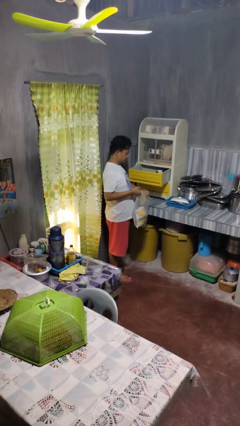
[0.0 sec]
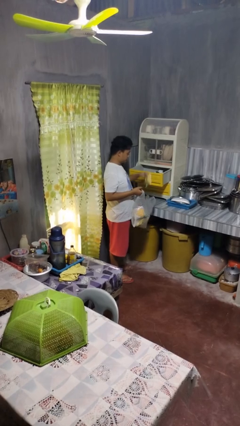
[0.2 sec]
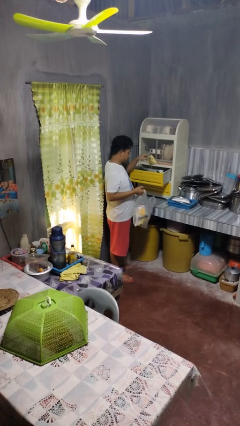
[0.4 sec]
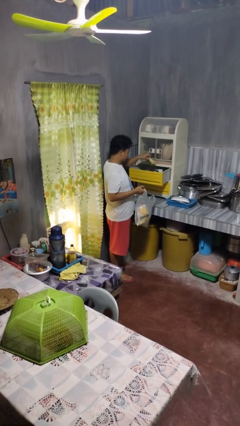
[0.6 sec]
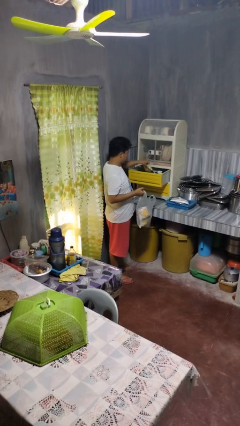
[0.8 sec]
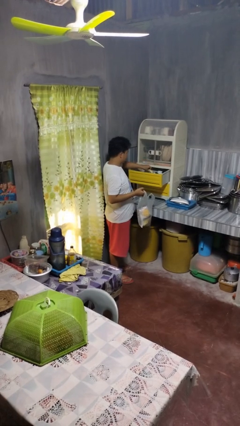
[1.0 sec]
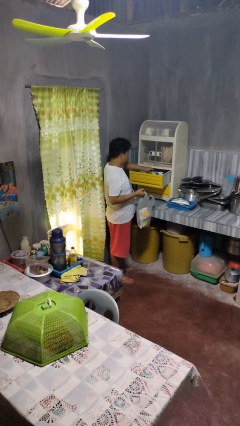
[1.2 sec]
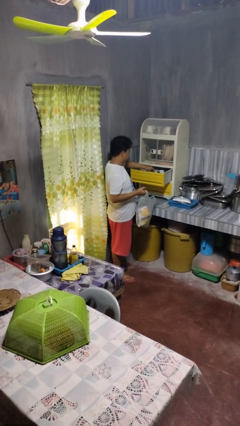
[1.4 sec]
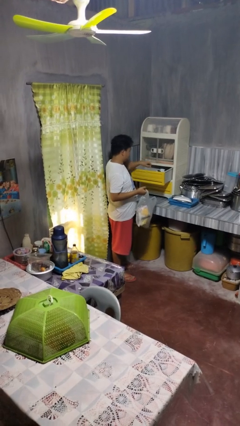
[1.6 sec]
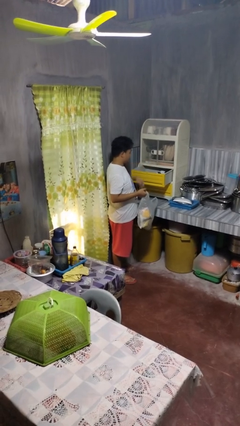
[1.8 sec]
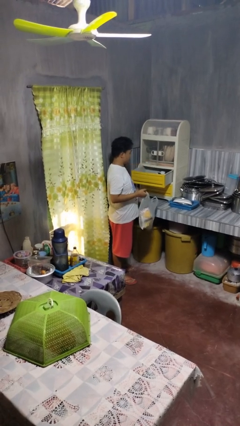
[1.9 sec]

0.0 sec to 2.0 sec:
person loads groceries into cabinet

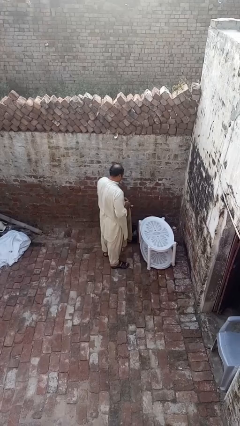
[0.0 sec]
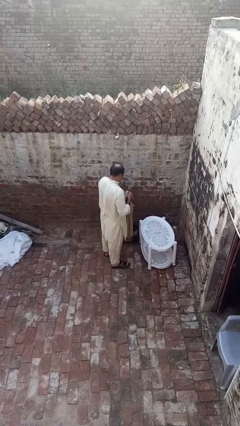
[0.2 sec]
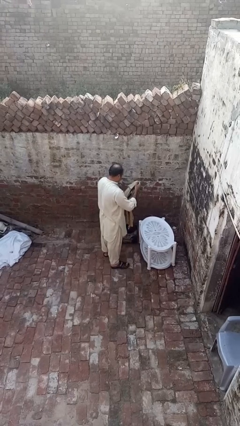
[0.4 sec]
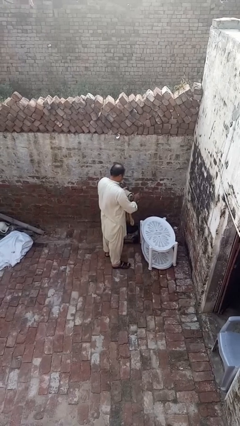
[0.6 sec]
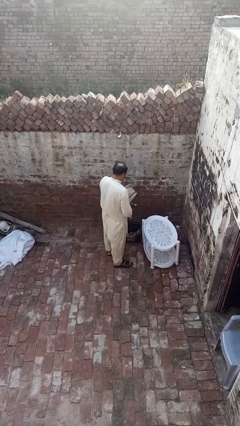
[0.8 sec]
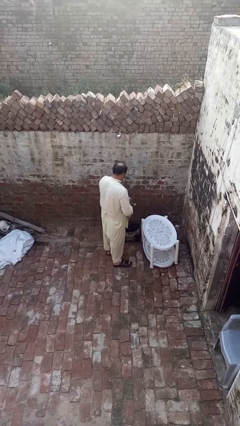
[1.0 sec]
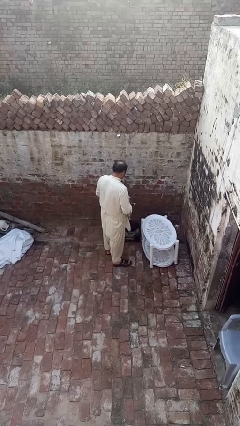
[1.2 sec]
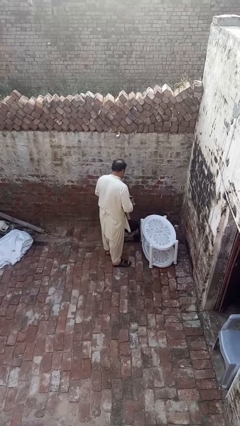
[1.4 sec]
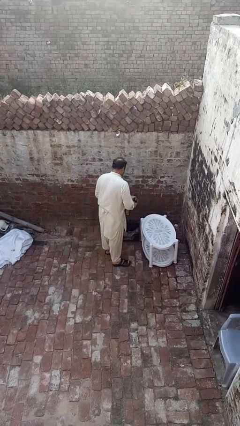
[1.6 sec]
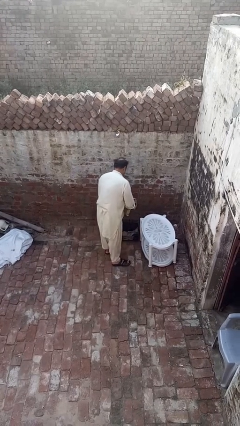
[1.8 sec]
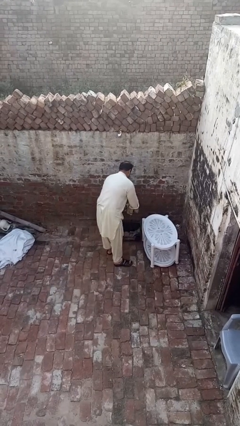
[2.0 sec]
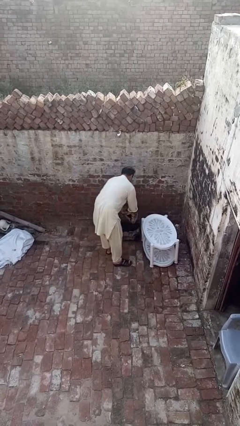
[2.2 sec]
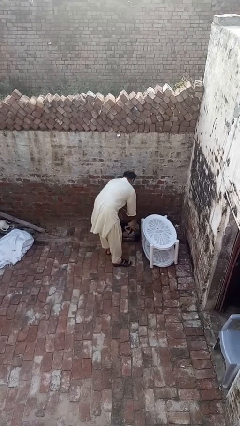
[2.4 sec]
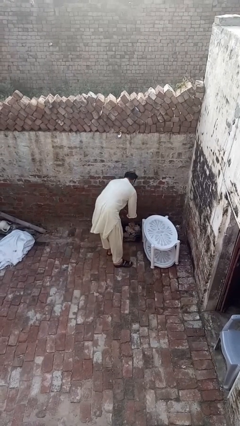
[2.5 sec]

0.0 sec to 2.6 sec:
person folds shirt

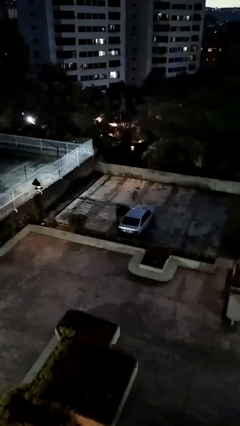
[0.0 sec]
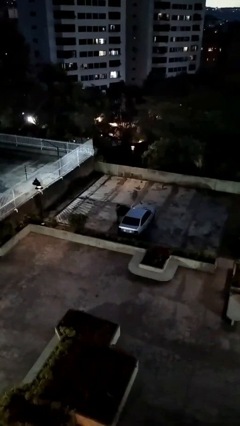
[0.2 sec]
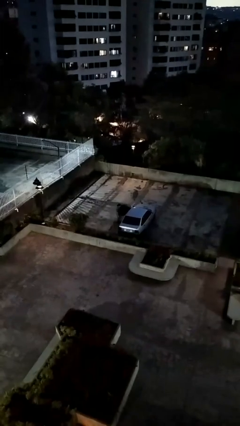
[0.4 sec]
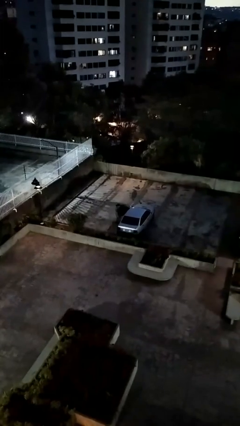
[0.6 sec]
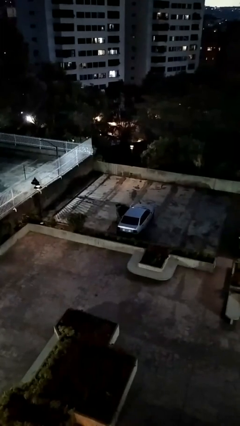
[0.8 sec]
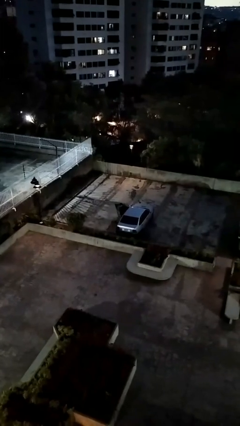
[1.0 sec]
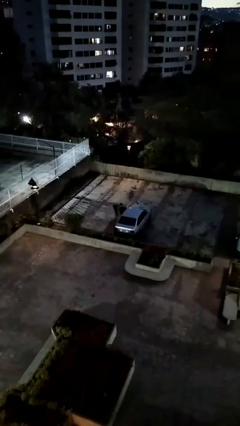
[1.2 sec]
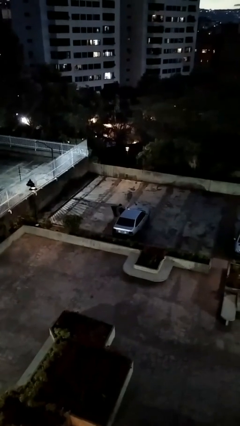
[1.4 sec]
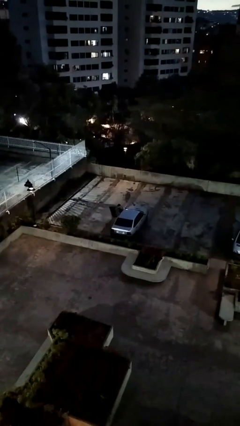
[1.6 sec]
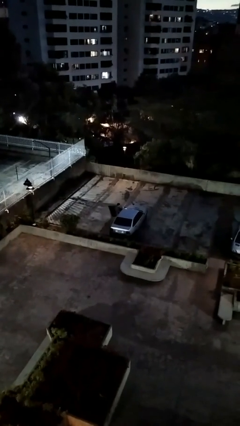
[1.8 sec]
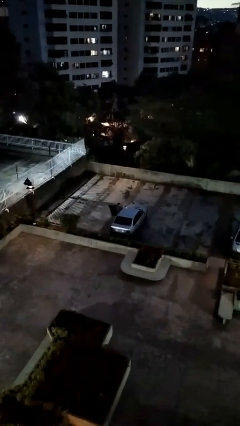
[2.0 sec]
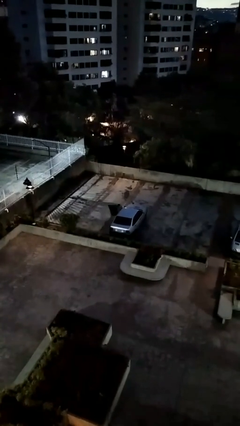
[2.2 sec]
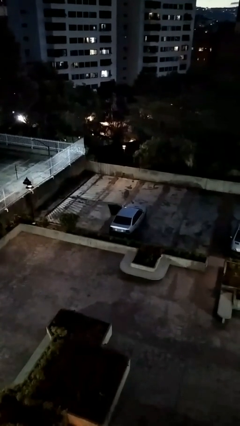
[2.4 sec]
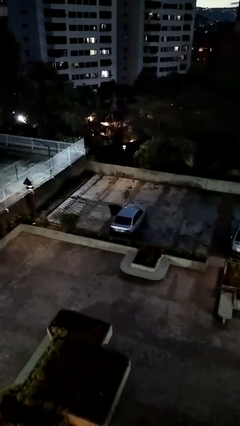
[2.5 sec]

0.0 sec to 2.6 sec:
person enters car

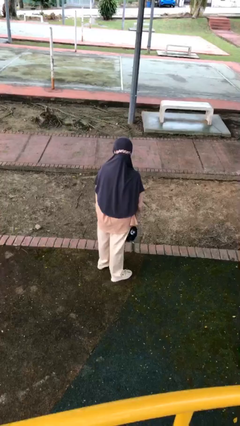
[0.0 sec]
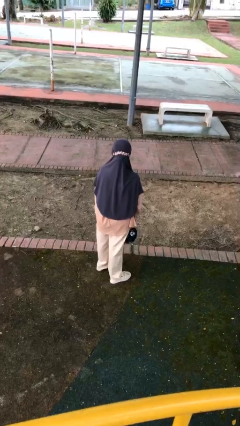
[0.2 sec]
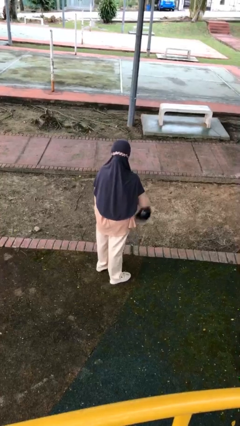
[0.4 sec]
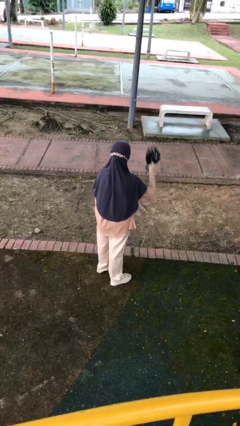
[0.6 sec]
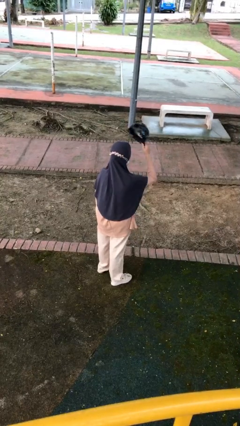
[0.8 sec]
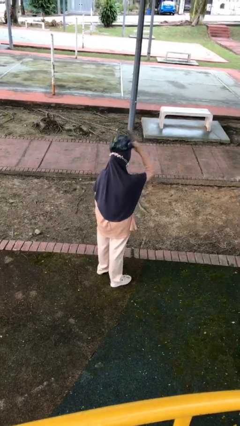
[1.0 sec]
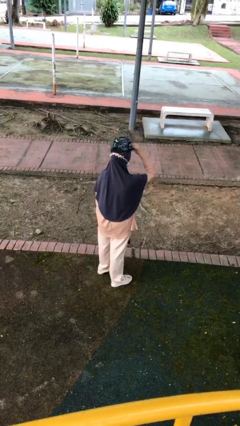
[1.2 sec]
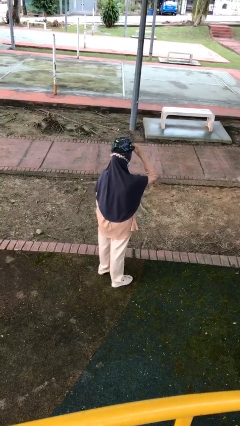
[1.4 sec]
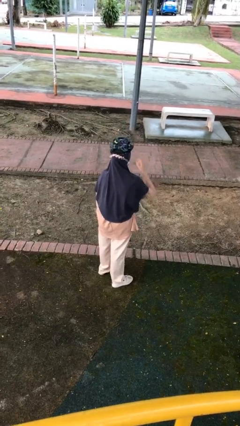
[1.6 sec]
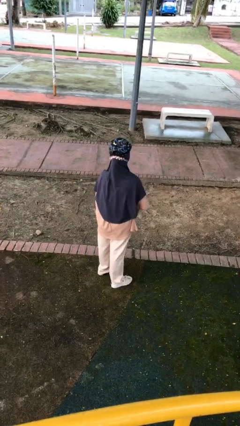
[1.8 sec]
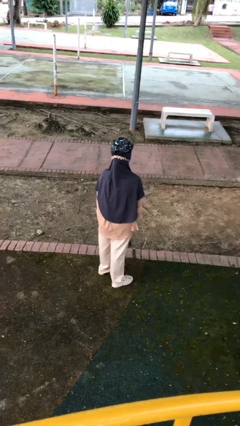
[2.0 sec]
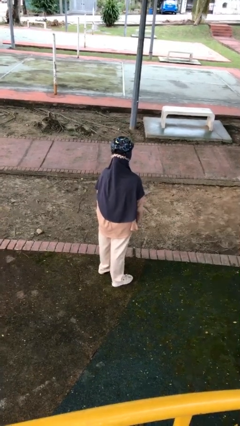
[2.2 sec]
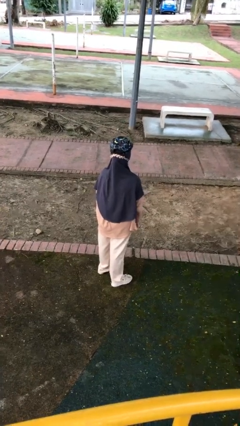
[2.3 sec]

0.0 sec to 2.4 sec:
person puts on hat

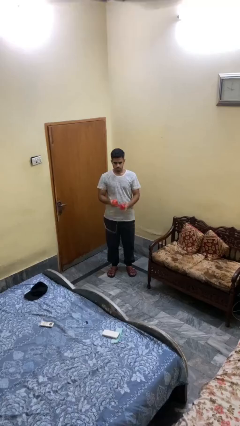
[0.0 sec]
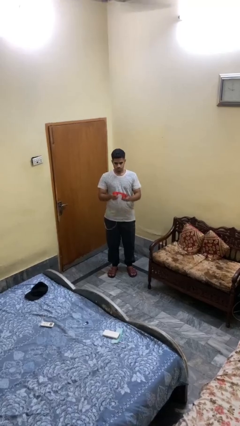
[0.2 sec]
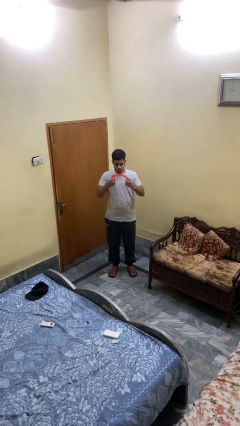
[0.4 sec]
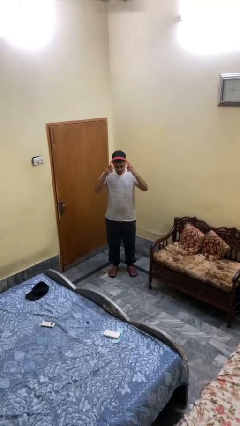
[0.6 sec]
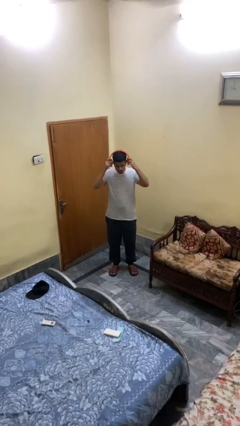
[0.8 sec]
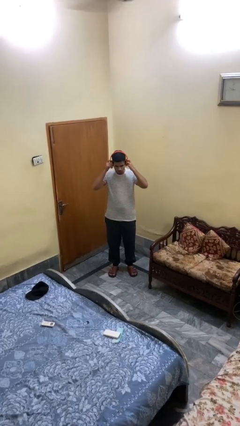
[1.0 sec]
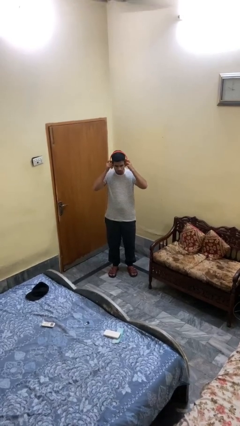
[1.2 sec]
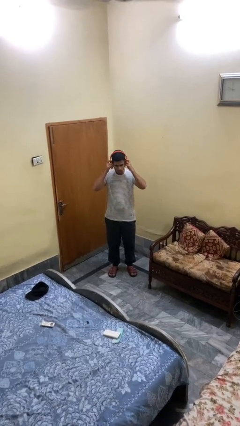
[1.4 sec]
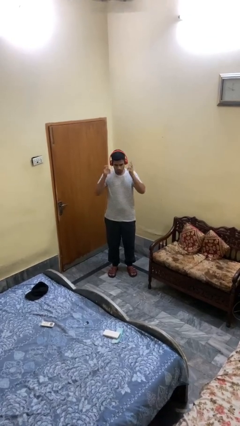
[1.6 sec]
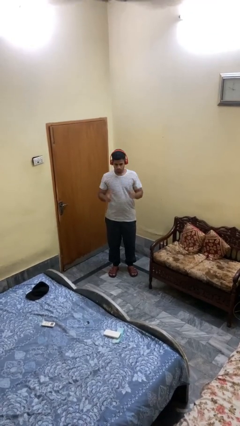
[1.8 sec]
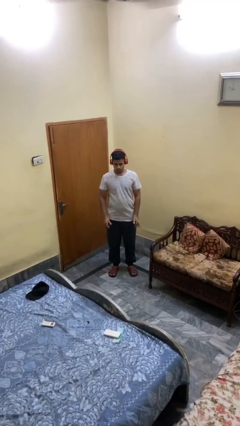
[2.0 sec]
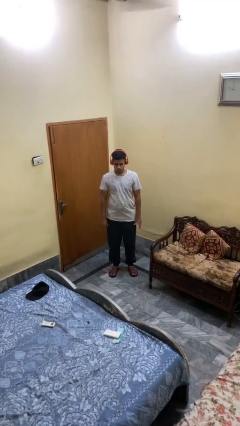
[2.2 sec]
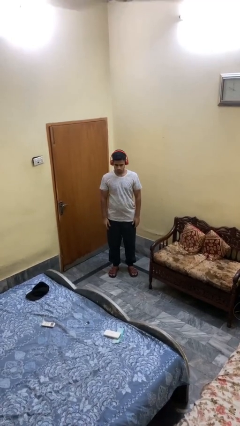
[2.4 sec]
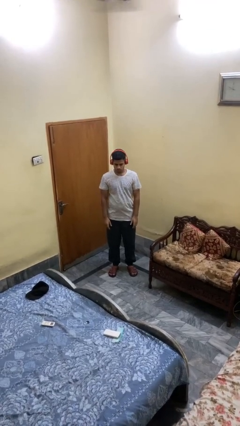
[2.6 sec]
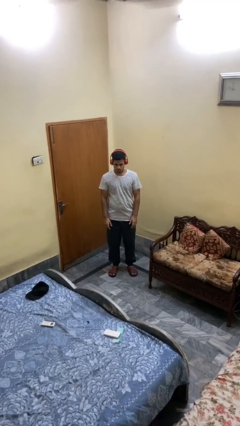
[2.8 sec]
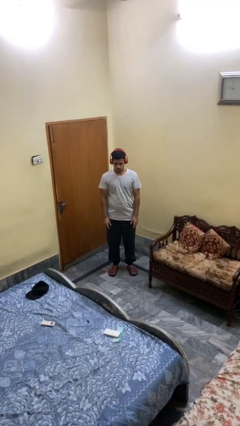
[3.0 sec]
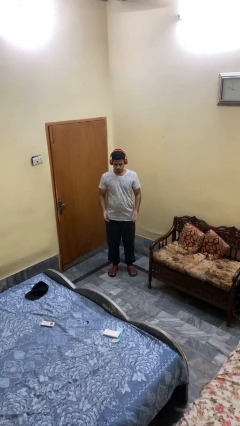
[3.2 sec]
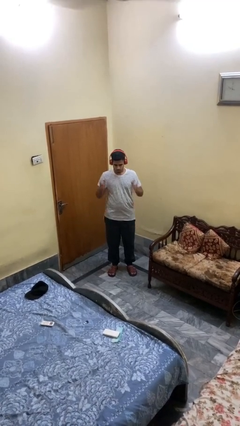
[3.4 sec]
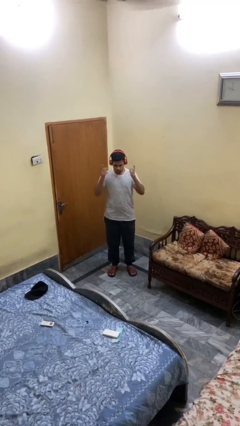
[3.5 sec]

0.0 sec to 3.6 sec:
person puts on headphones

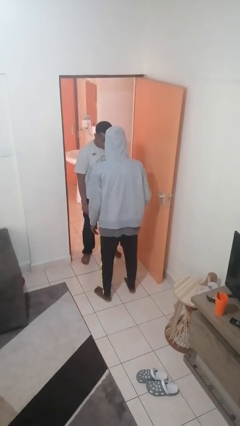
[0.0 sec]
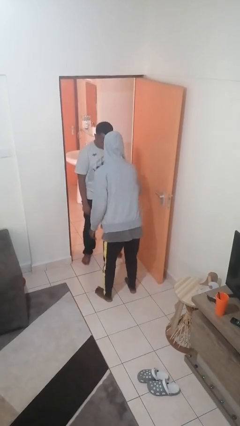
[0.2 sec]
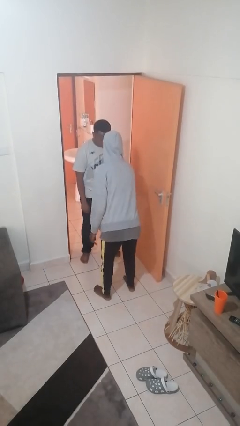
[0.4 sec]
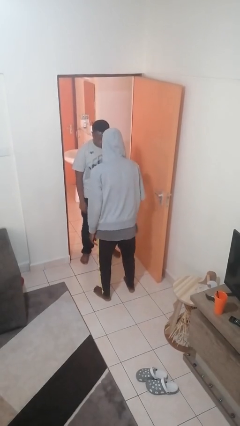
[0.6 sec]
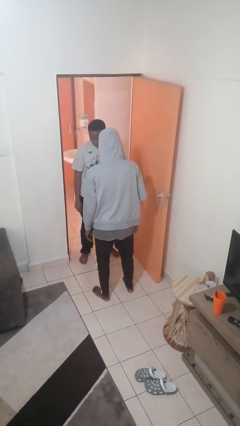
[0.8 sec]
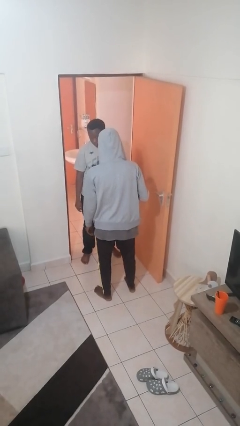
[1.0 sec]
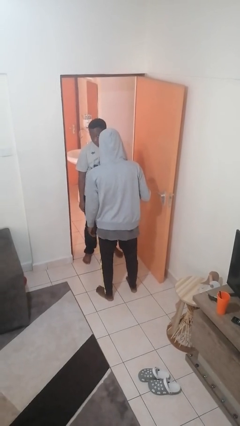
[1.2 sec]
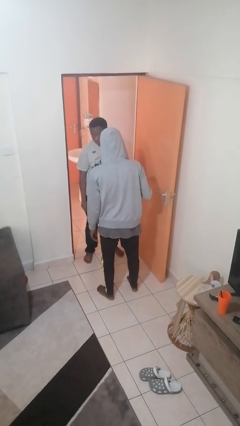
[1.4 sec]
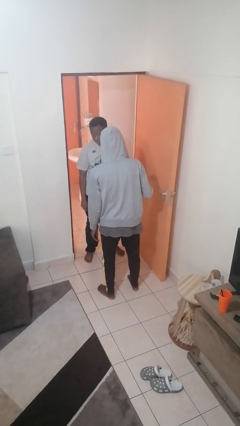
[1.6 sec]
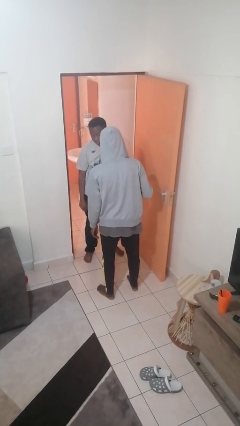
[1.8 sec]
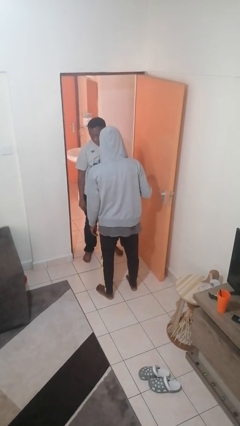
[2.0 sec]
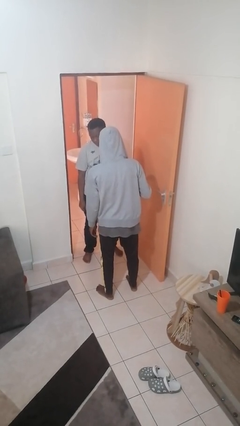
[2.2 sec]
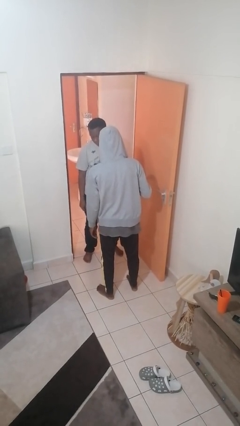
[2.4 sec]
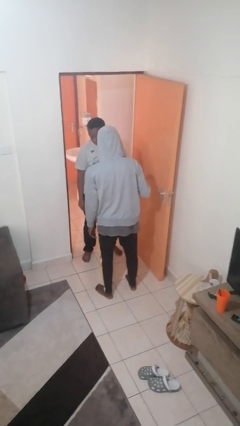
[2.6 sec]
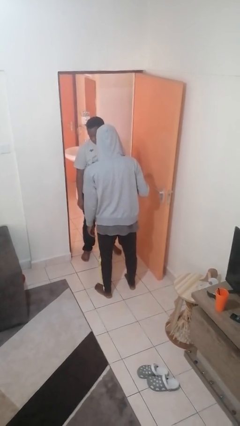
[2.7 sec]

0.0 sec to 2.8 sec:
person grabs person by forearm

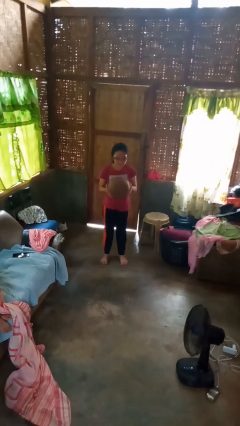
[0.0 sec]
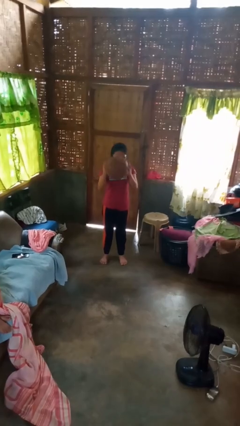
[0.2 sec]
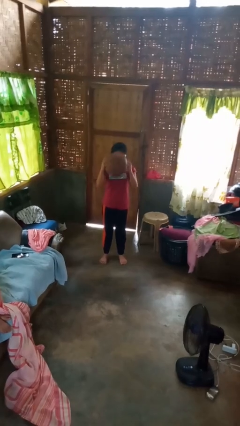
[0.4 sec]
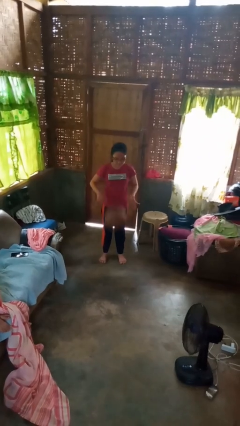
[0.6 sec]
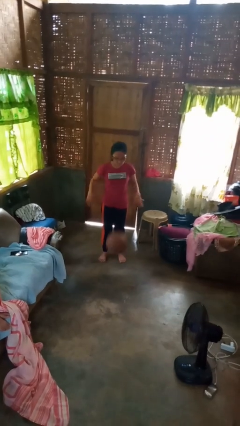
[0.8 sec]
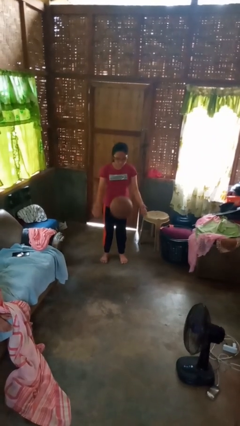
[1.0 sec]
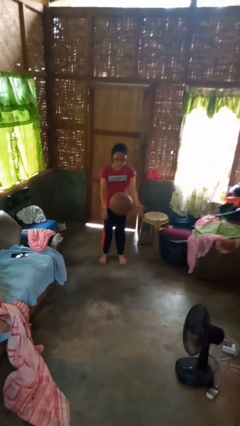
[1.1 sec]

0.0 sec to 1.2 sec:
person bounces ball on floor
